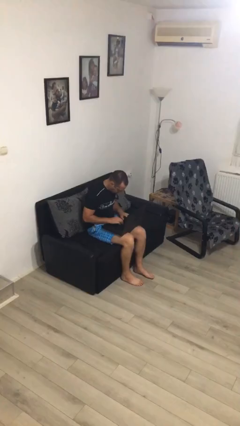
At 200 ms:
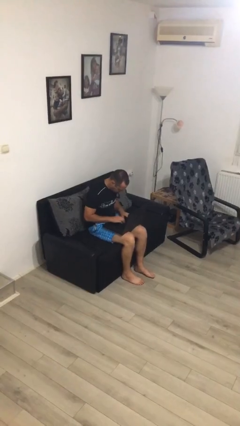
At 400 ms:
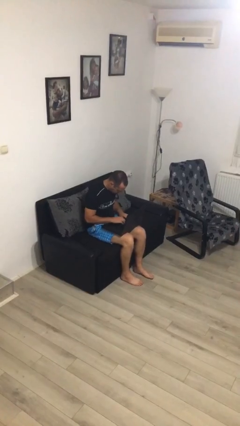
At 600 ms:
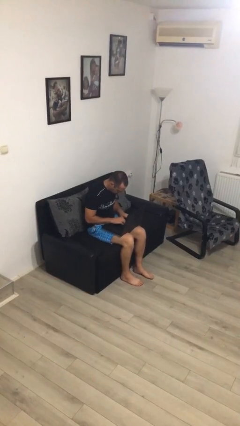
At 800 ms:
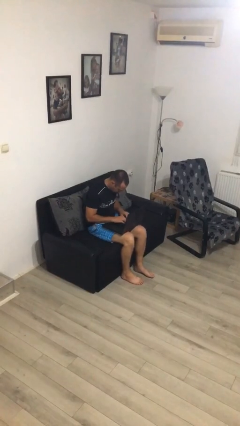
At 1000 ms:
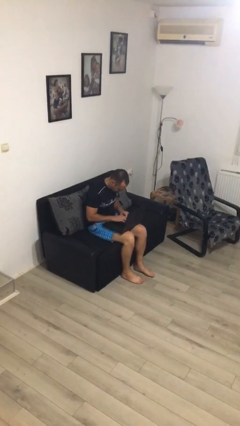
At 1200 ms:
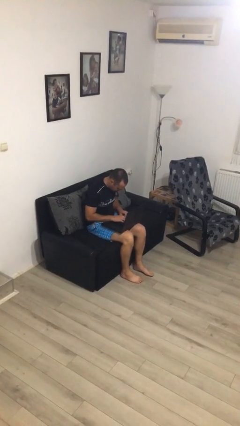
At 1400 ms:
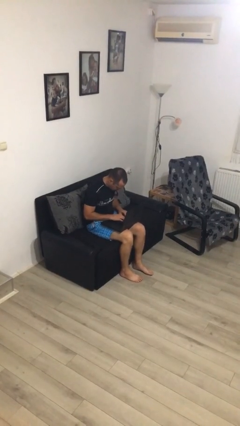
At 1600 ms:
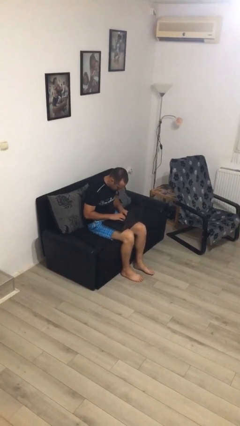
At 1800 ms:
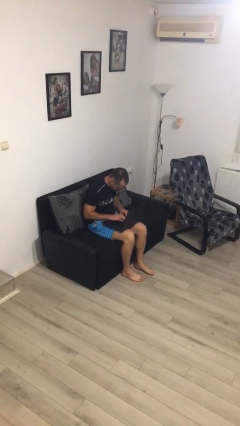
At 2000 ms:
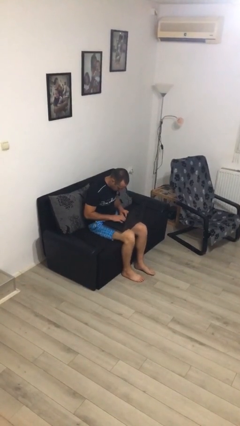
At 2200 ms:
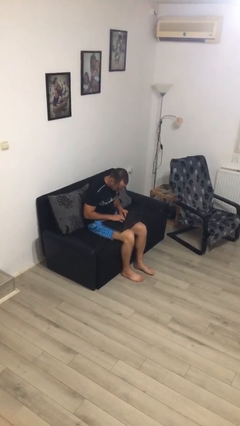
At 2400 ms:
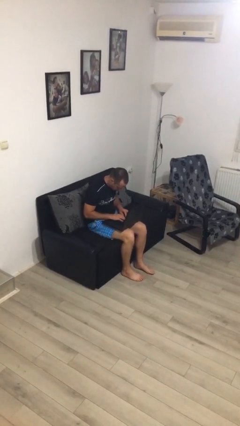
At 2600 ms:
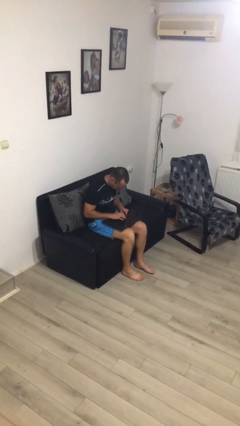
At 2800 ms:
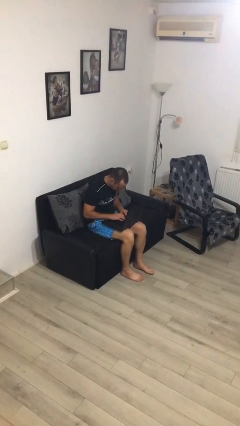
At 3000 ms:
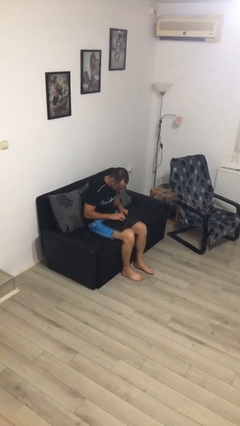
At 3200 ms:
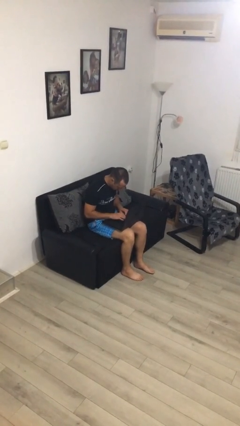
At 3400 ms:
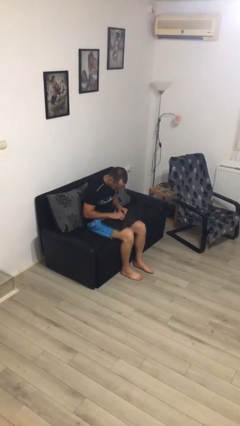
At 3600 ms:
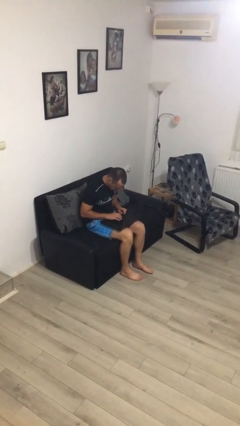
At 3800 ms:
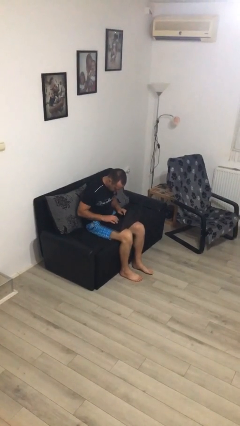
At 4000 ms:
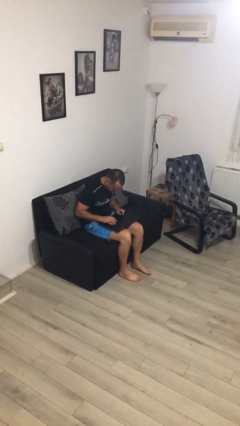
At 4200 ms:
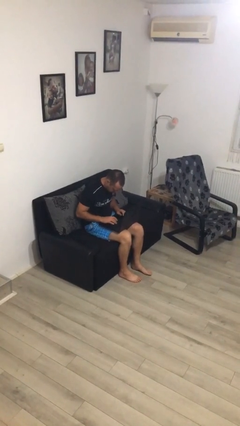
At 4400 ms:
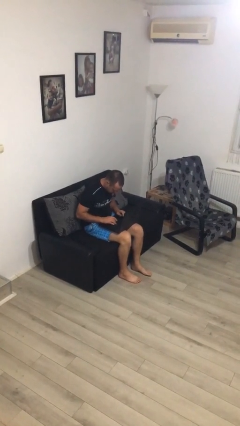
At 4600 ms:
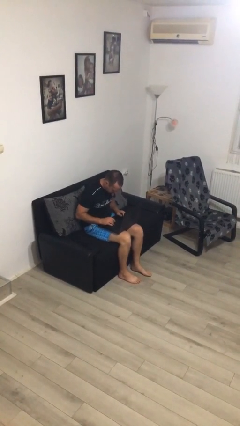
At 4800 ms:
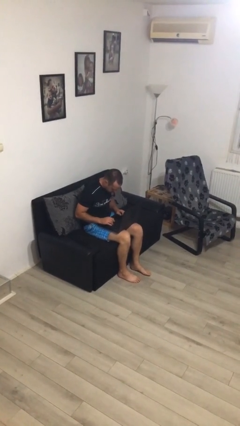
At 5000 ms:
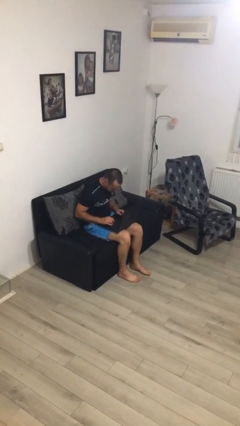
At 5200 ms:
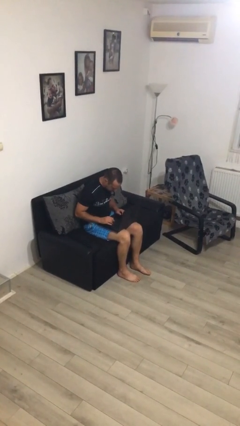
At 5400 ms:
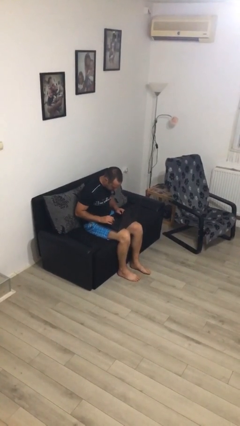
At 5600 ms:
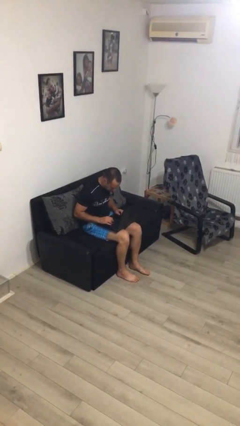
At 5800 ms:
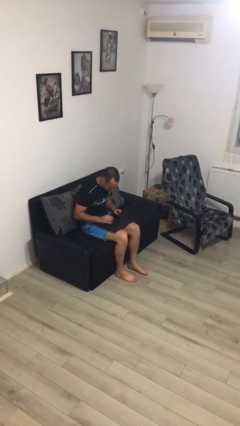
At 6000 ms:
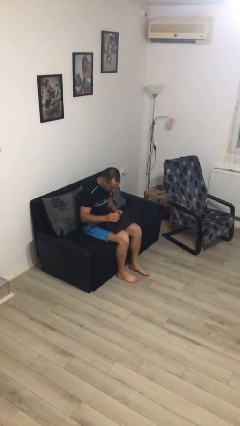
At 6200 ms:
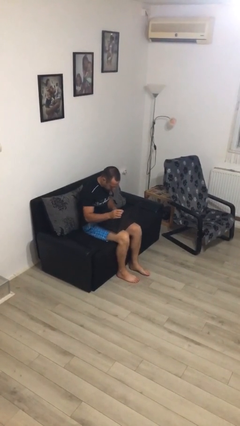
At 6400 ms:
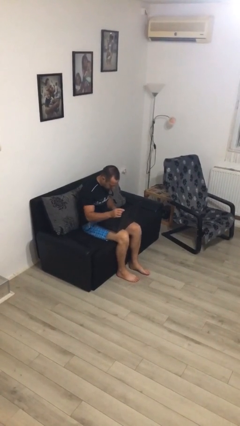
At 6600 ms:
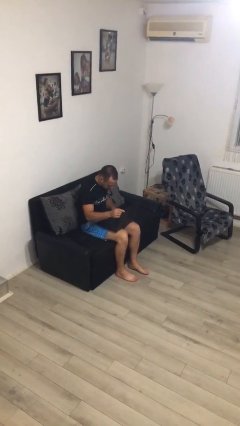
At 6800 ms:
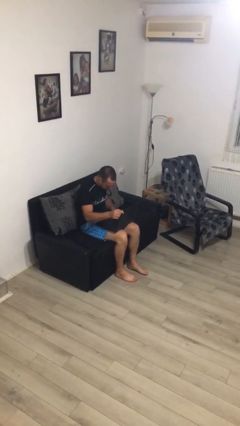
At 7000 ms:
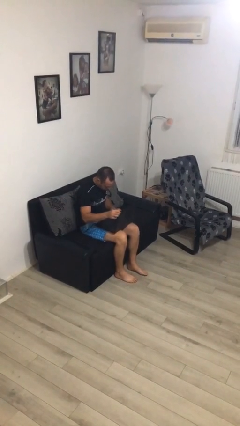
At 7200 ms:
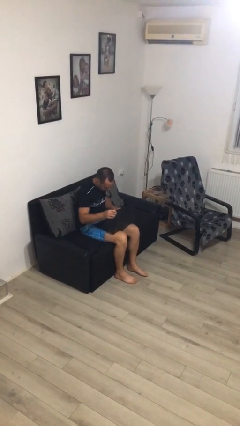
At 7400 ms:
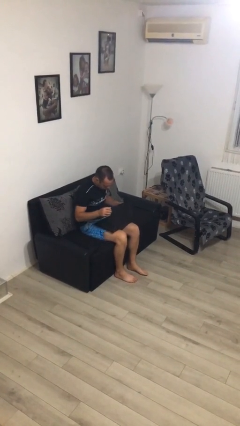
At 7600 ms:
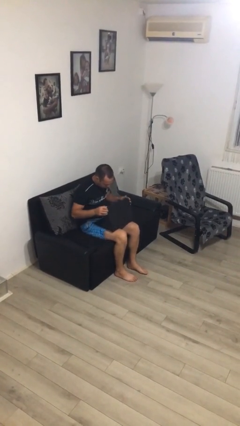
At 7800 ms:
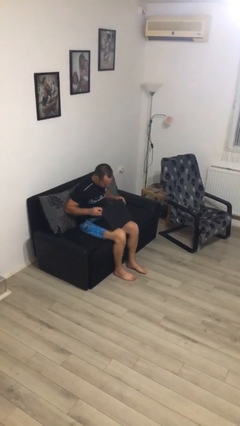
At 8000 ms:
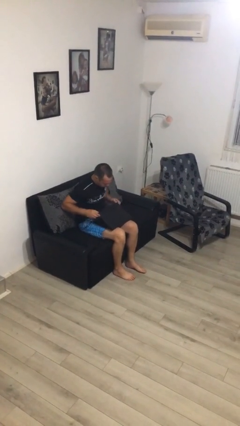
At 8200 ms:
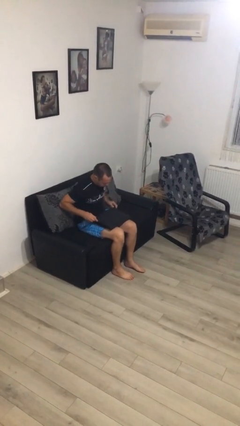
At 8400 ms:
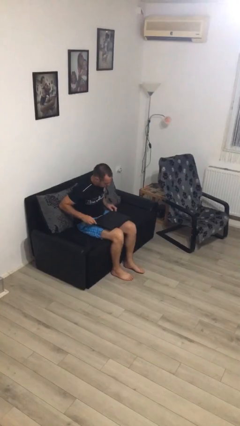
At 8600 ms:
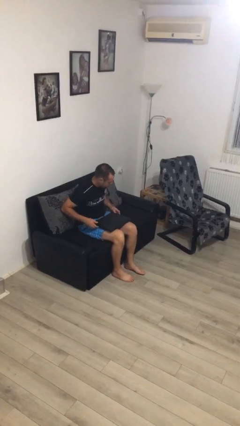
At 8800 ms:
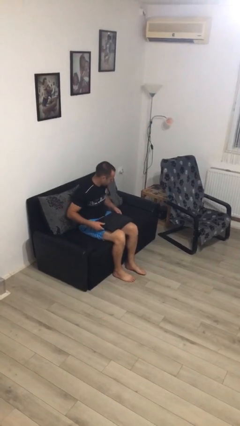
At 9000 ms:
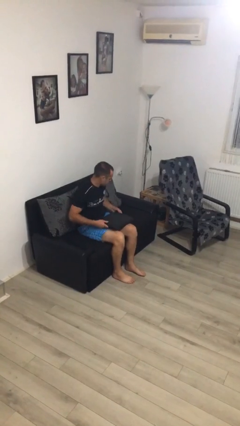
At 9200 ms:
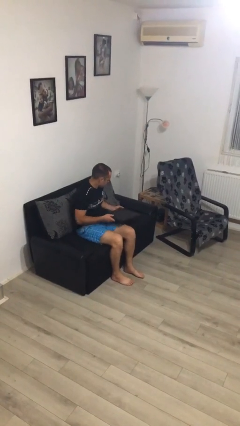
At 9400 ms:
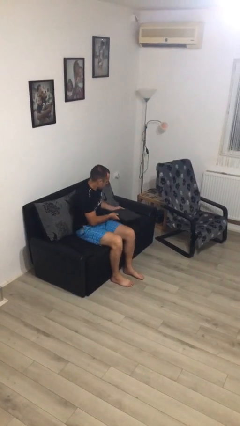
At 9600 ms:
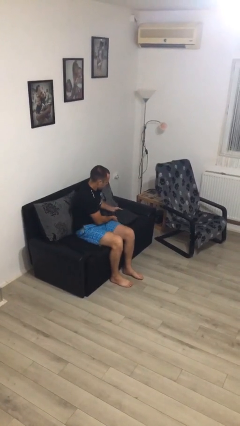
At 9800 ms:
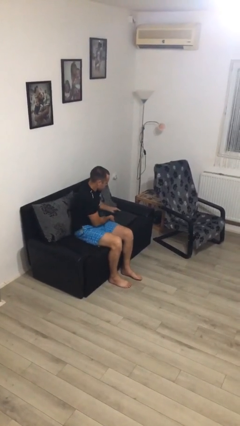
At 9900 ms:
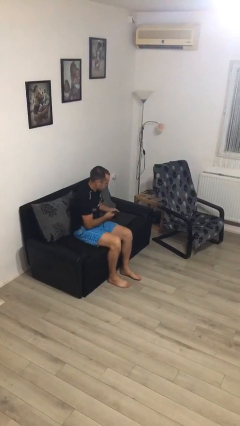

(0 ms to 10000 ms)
person interacts with laptop

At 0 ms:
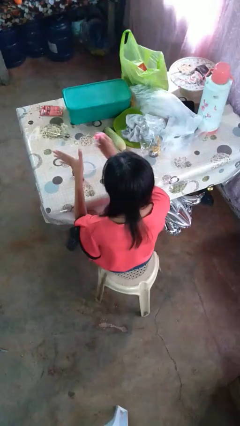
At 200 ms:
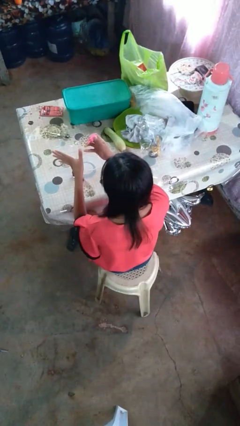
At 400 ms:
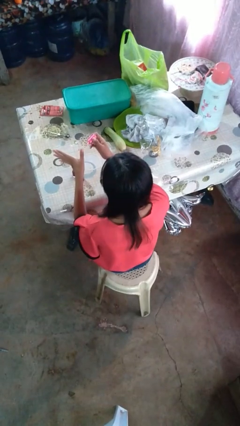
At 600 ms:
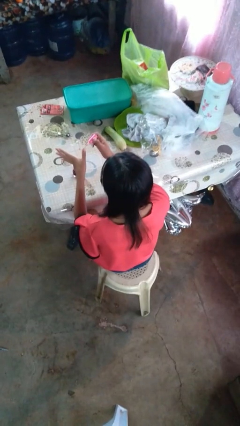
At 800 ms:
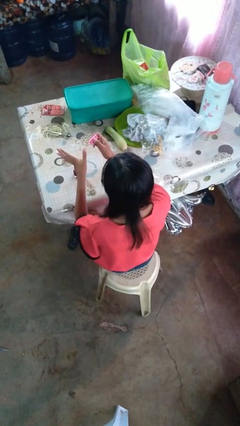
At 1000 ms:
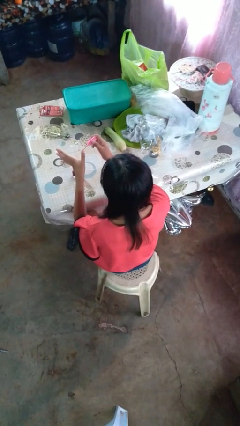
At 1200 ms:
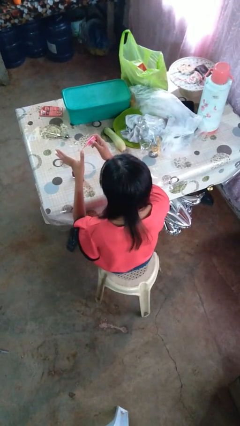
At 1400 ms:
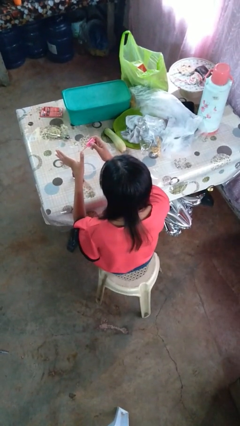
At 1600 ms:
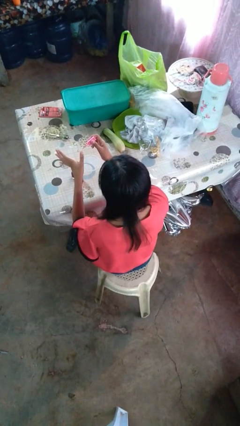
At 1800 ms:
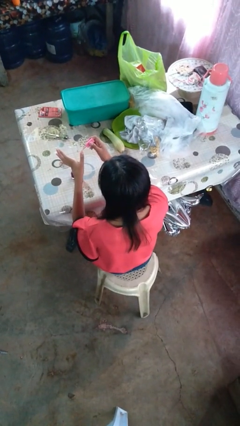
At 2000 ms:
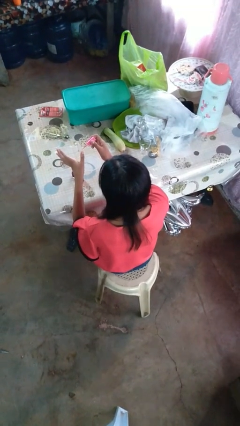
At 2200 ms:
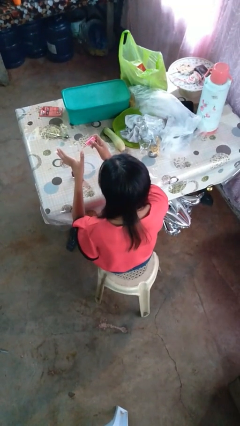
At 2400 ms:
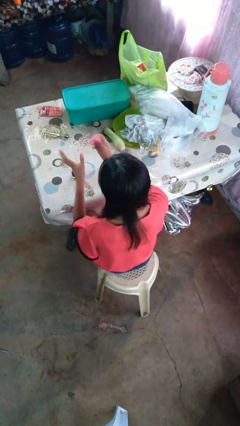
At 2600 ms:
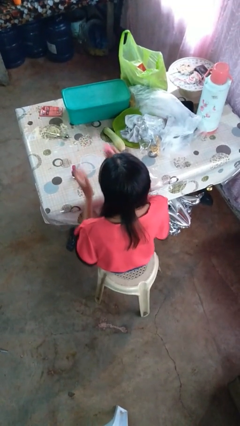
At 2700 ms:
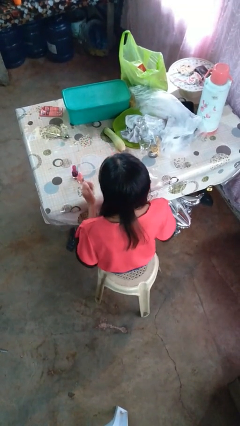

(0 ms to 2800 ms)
person paints fingernails

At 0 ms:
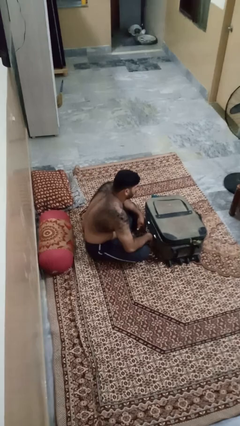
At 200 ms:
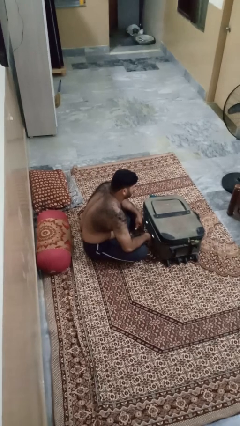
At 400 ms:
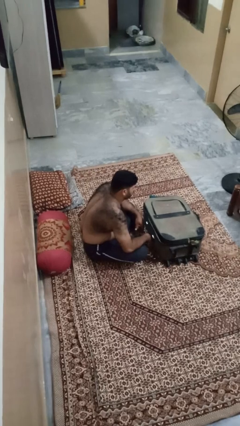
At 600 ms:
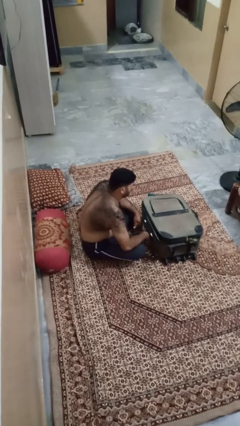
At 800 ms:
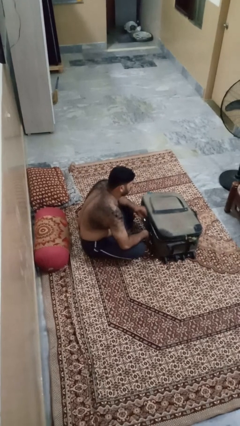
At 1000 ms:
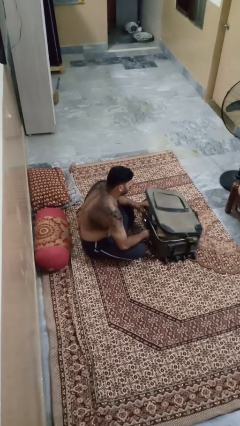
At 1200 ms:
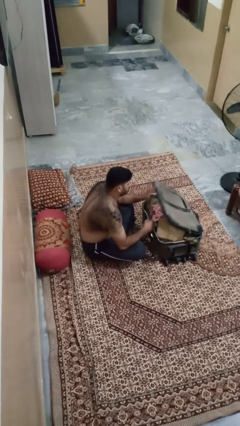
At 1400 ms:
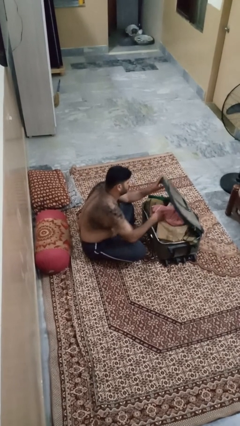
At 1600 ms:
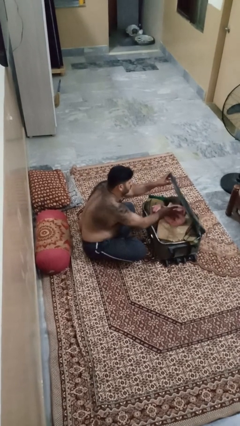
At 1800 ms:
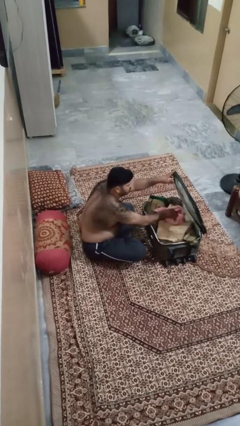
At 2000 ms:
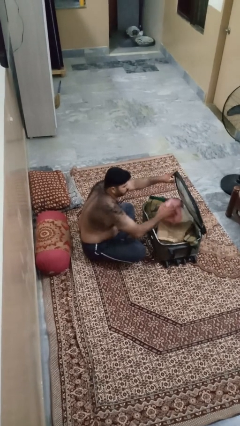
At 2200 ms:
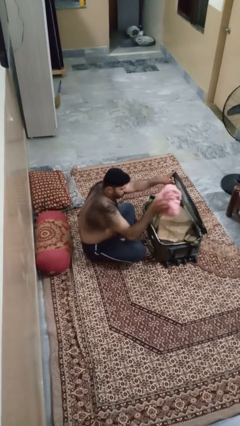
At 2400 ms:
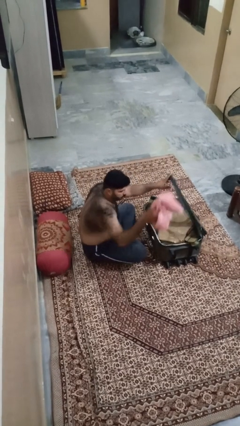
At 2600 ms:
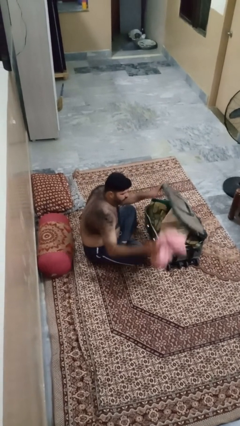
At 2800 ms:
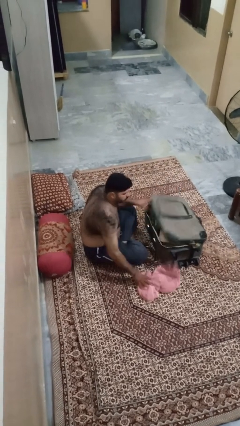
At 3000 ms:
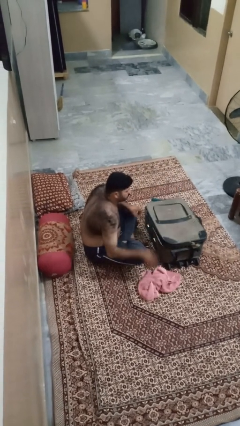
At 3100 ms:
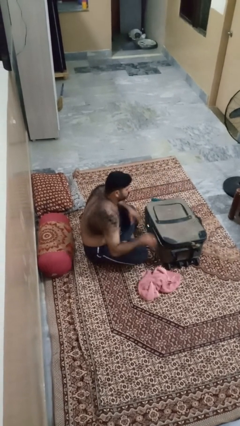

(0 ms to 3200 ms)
person unloads clothes from suitcase

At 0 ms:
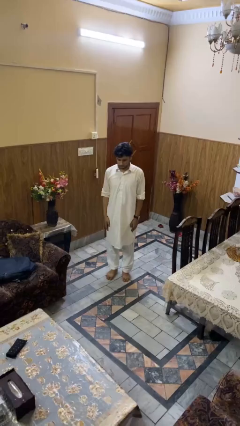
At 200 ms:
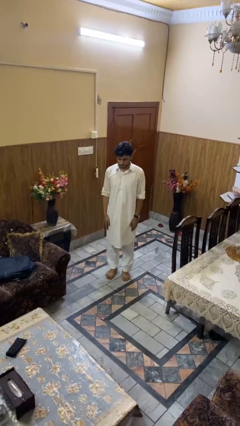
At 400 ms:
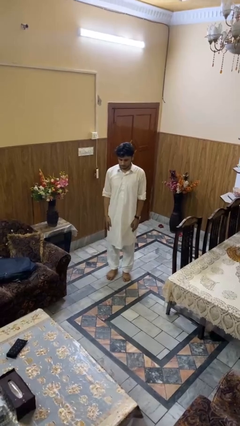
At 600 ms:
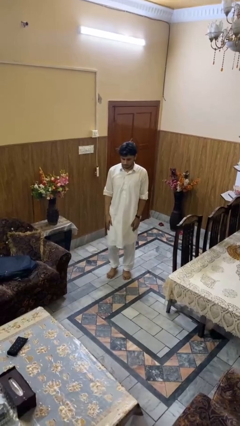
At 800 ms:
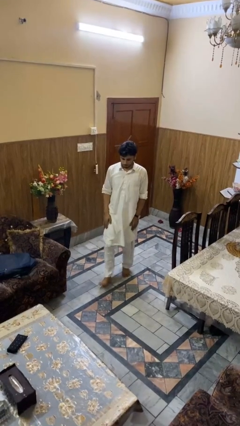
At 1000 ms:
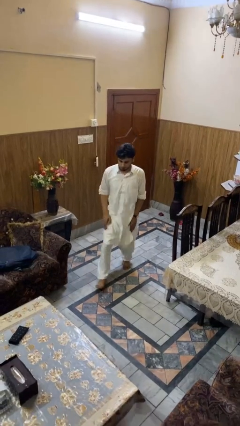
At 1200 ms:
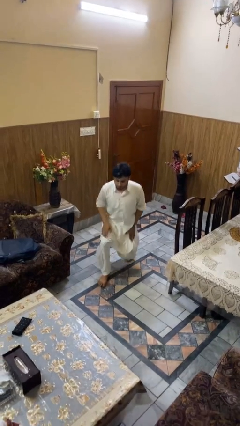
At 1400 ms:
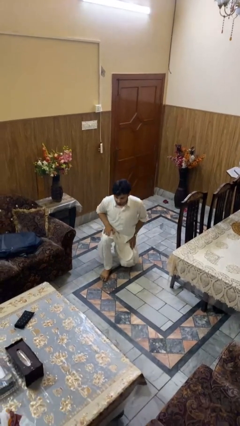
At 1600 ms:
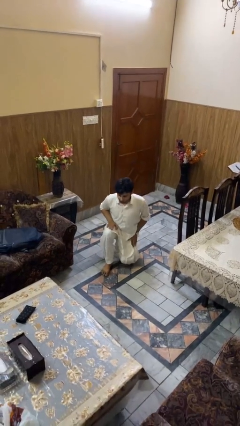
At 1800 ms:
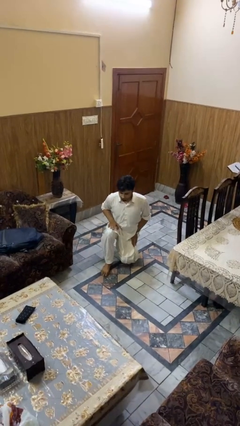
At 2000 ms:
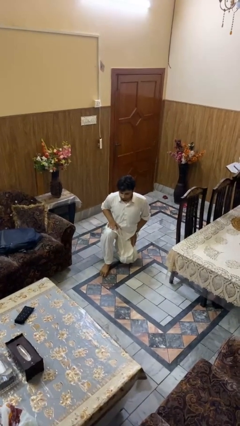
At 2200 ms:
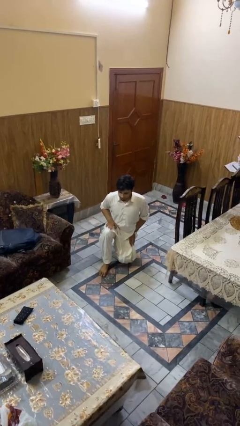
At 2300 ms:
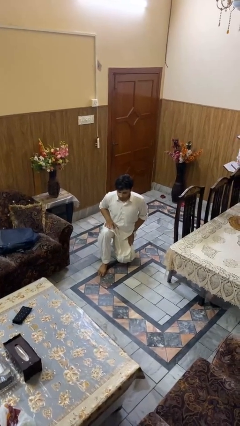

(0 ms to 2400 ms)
person kneels
